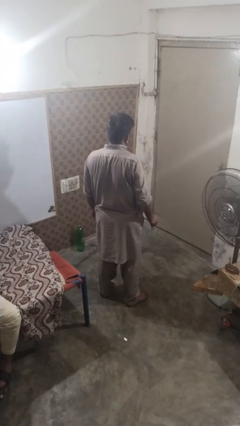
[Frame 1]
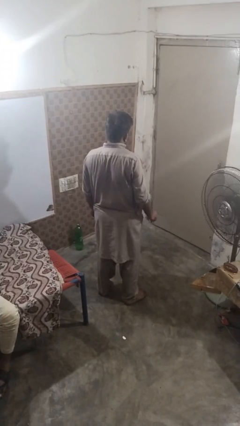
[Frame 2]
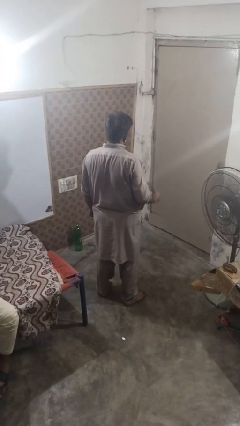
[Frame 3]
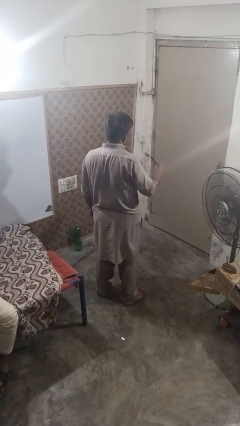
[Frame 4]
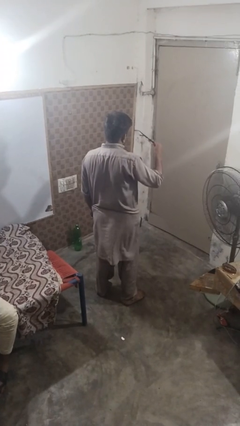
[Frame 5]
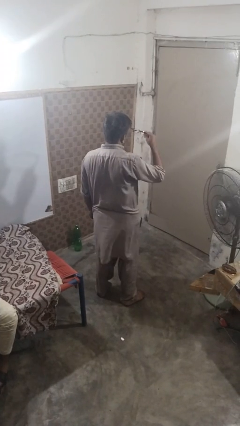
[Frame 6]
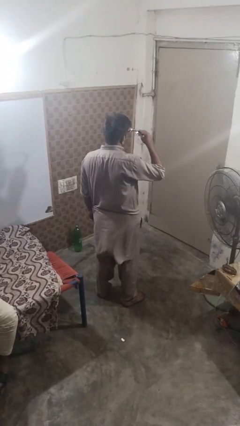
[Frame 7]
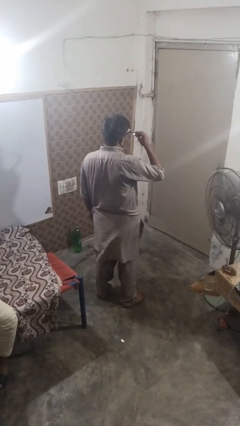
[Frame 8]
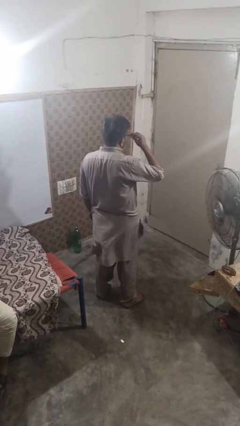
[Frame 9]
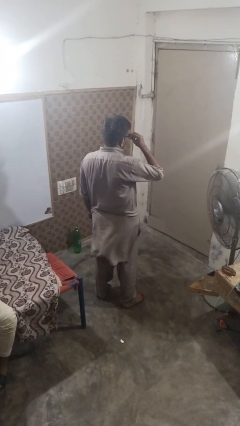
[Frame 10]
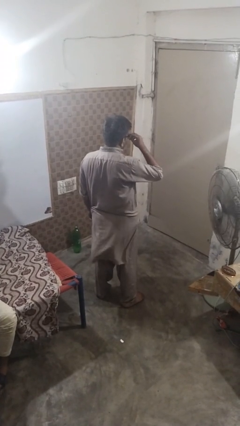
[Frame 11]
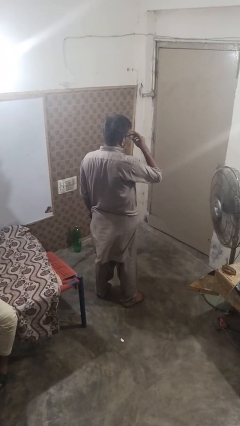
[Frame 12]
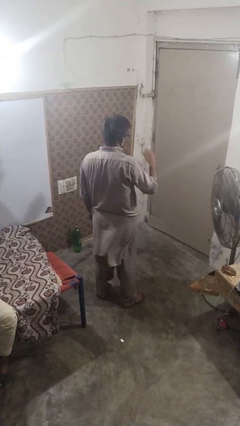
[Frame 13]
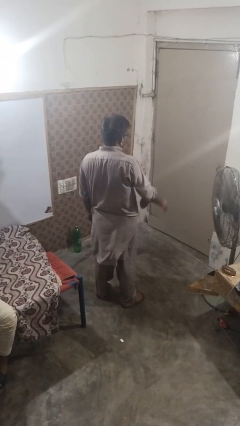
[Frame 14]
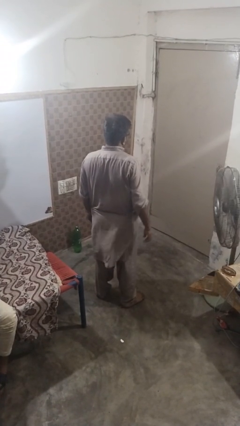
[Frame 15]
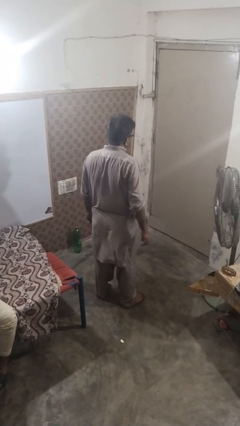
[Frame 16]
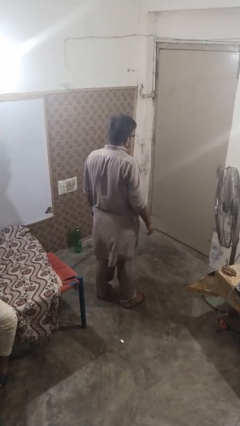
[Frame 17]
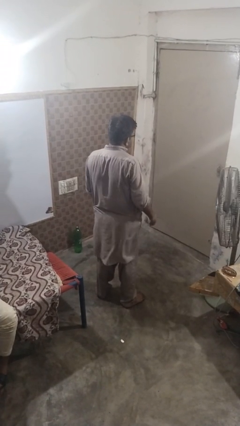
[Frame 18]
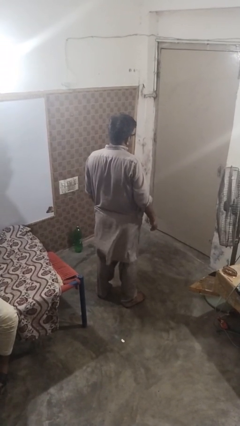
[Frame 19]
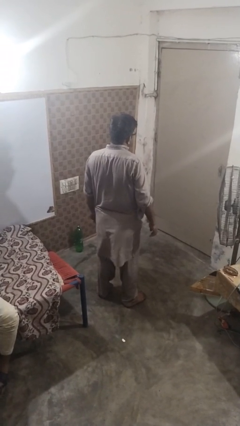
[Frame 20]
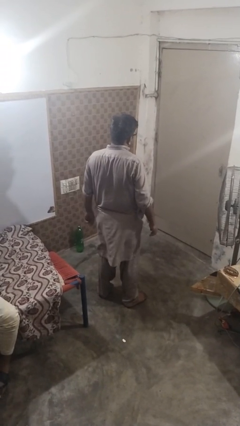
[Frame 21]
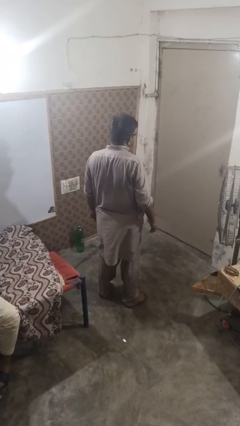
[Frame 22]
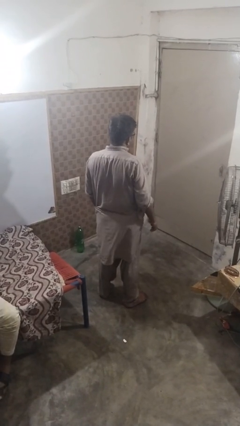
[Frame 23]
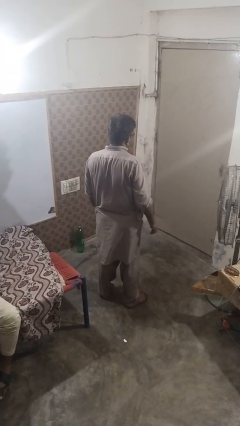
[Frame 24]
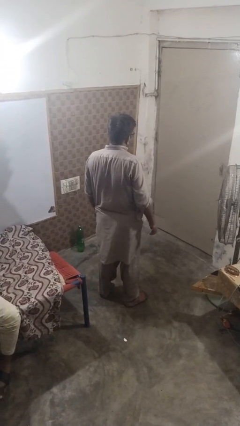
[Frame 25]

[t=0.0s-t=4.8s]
person puts on glasses

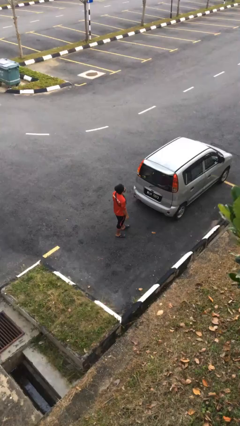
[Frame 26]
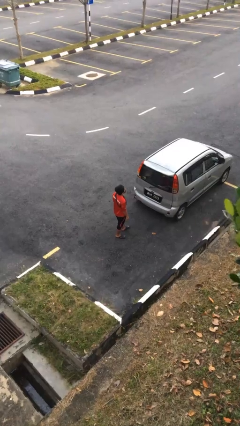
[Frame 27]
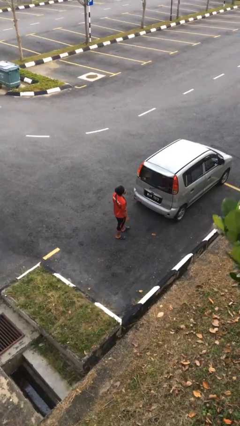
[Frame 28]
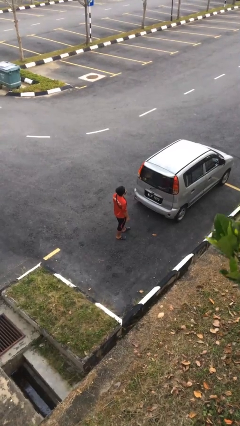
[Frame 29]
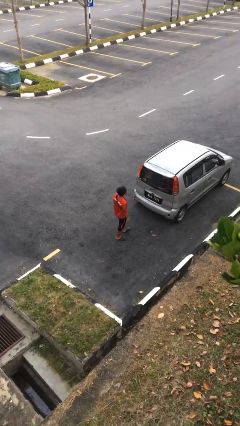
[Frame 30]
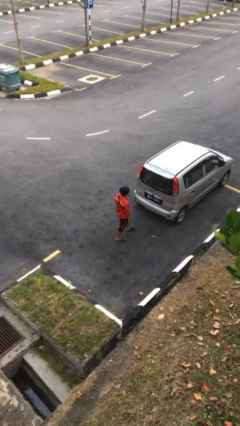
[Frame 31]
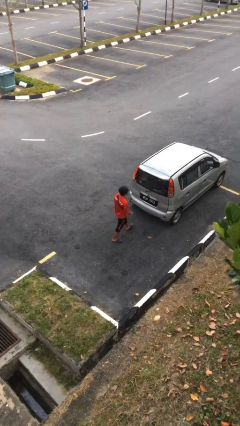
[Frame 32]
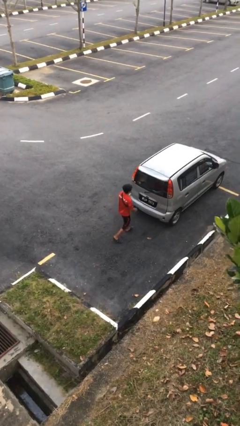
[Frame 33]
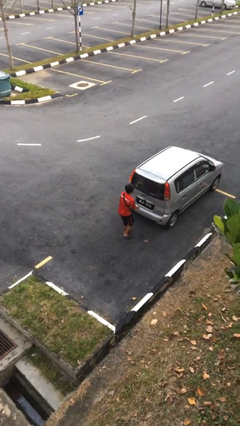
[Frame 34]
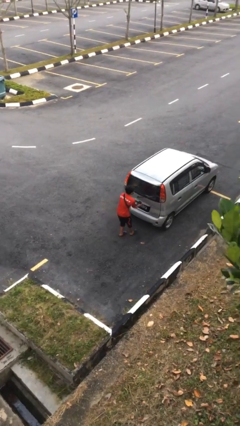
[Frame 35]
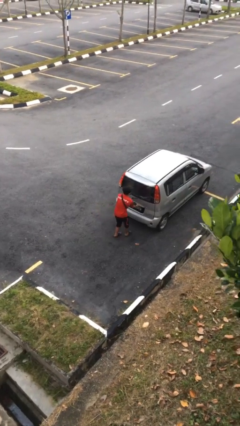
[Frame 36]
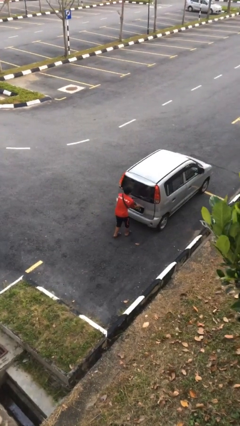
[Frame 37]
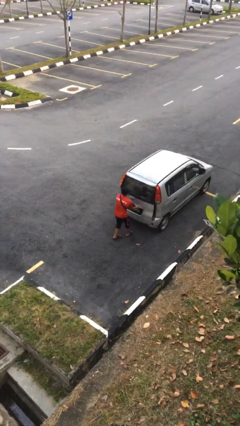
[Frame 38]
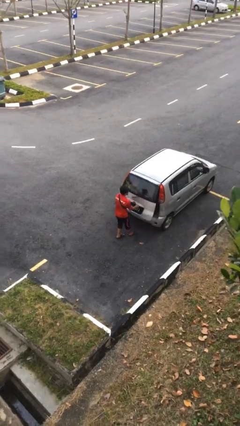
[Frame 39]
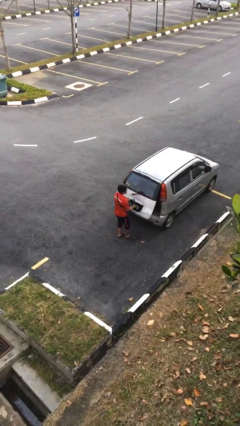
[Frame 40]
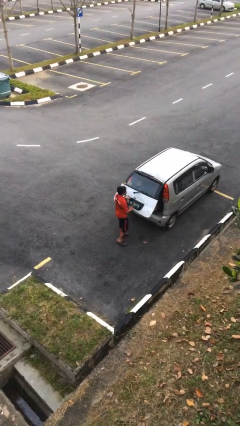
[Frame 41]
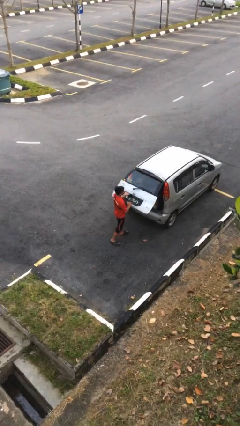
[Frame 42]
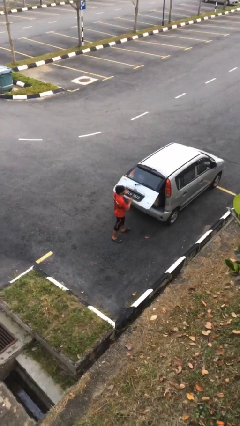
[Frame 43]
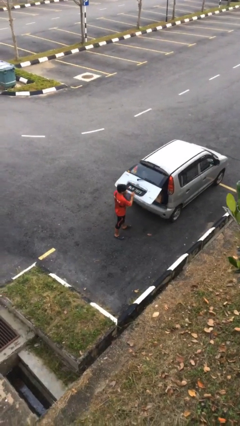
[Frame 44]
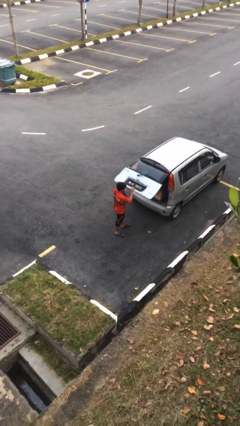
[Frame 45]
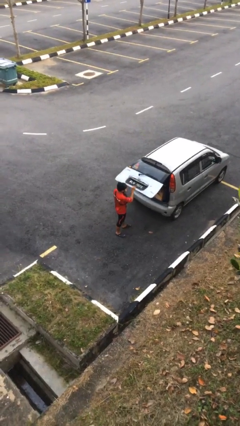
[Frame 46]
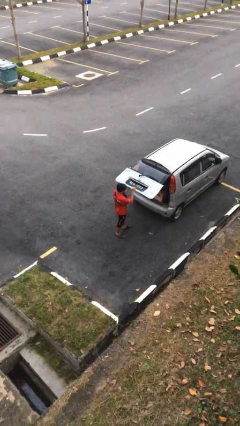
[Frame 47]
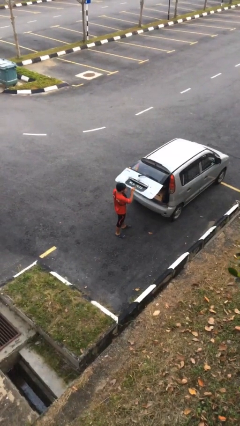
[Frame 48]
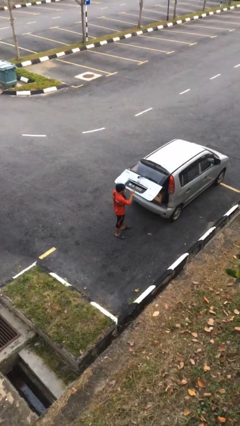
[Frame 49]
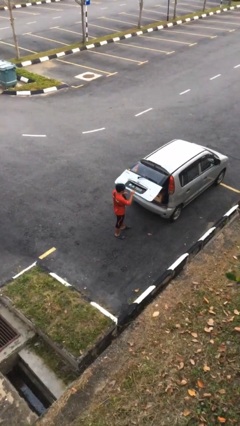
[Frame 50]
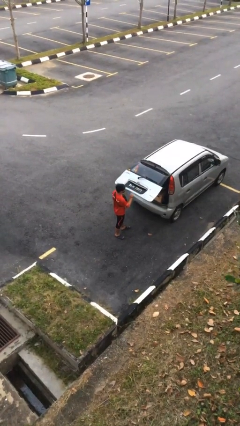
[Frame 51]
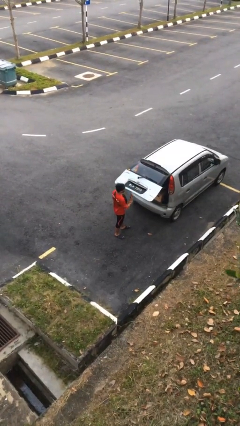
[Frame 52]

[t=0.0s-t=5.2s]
person opens car trunk

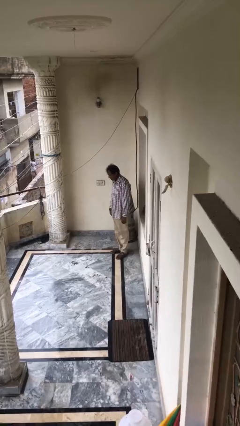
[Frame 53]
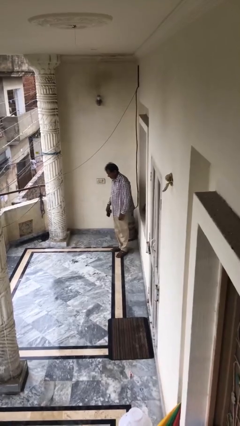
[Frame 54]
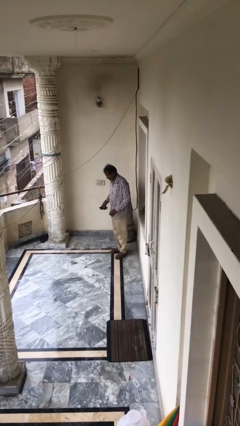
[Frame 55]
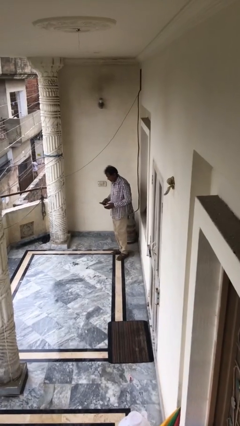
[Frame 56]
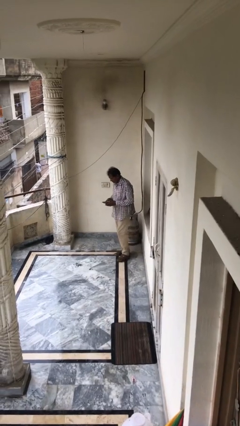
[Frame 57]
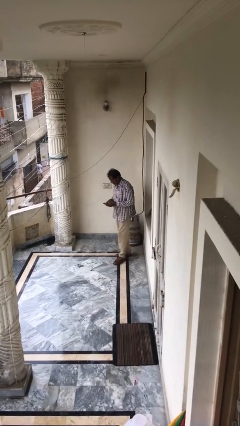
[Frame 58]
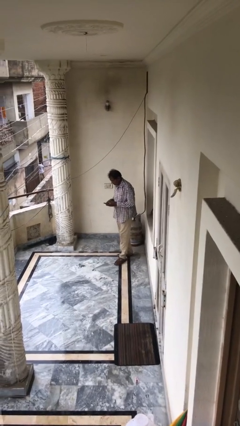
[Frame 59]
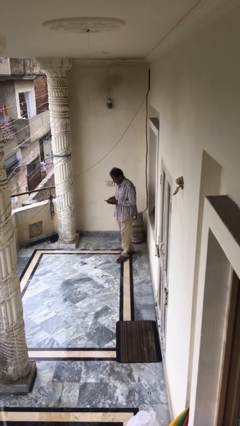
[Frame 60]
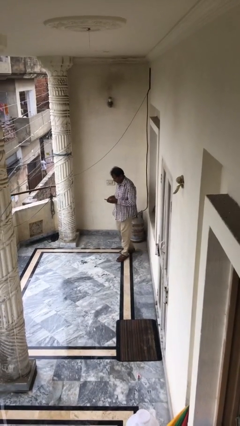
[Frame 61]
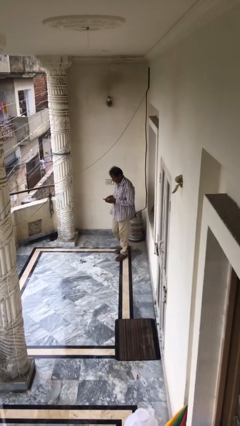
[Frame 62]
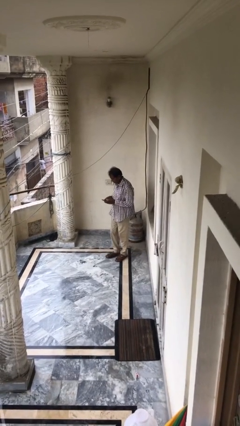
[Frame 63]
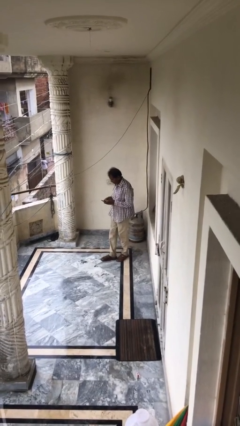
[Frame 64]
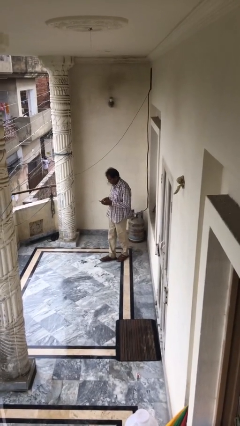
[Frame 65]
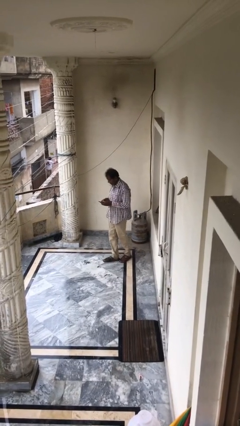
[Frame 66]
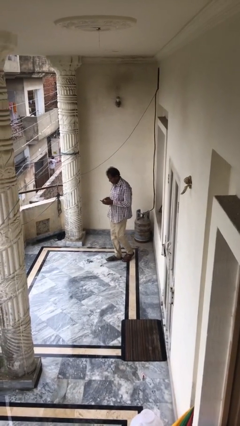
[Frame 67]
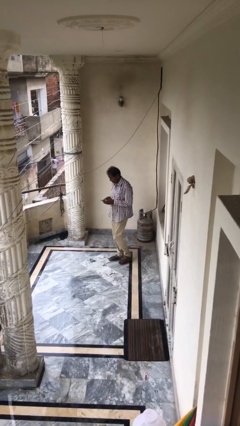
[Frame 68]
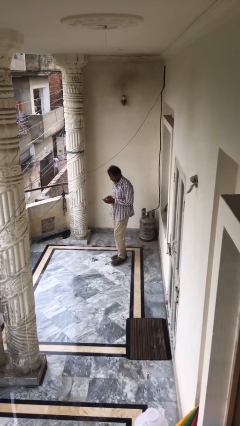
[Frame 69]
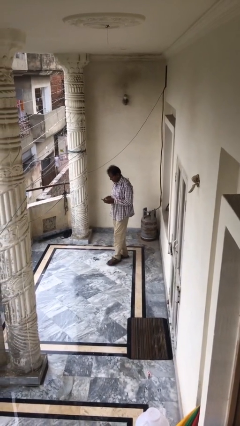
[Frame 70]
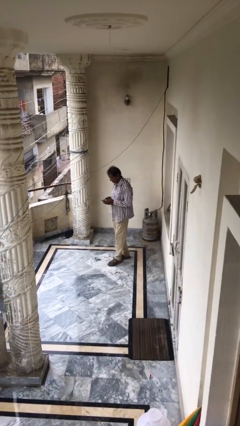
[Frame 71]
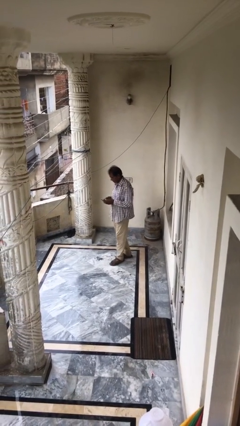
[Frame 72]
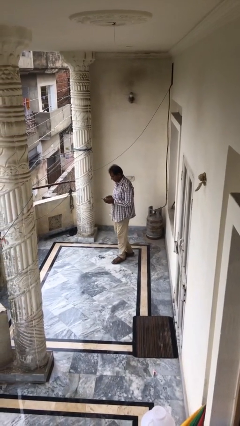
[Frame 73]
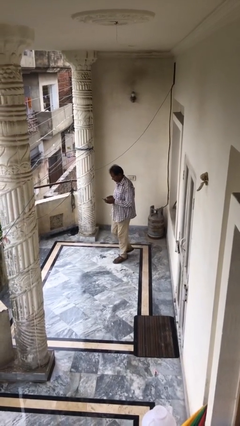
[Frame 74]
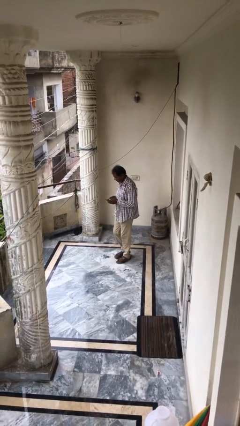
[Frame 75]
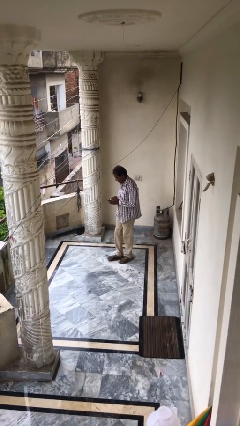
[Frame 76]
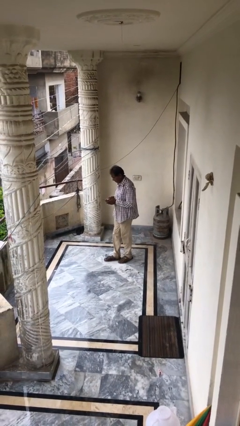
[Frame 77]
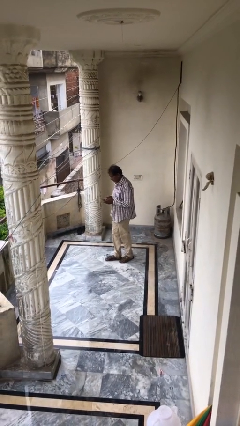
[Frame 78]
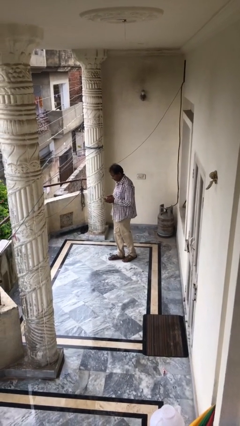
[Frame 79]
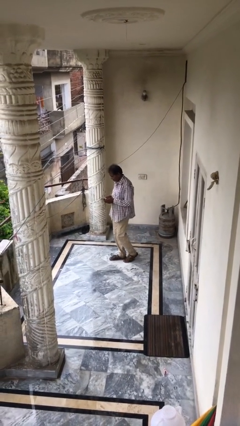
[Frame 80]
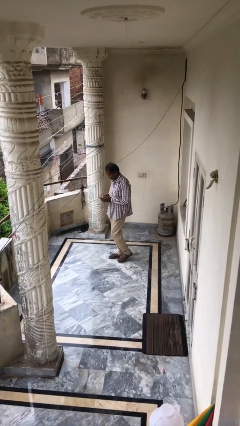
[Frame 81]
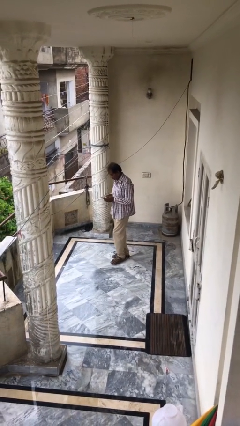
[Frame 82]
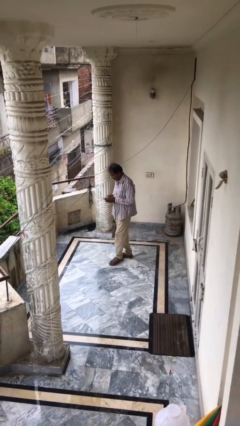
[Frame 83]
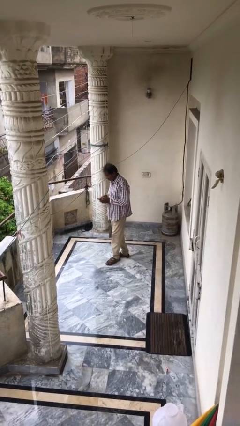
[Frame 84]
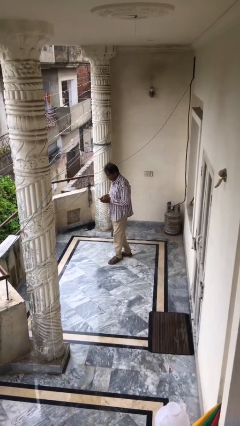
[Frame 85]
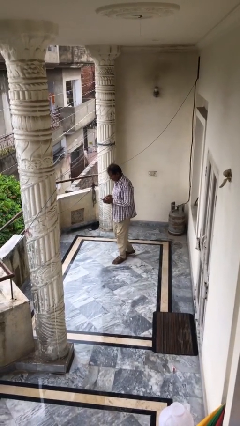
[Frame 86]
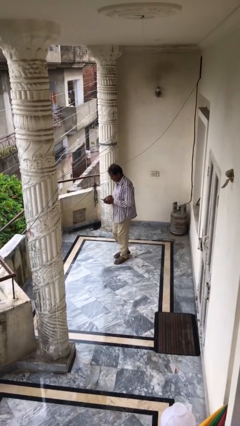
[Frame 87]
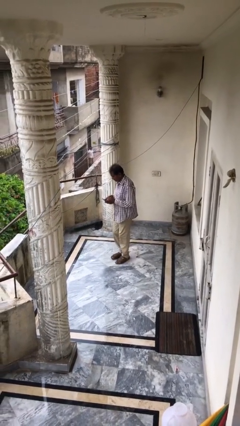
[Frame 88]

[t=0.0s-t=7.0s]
person texts on phone

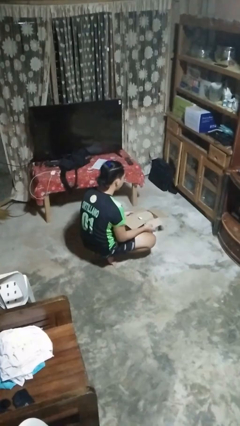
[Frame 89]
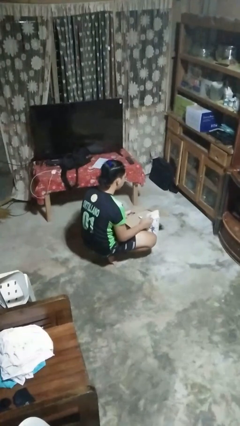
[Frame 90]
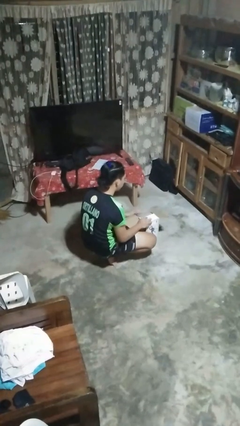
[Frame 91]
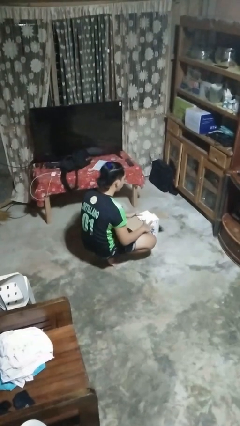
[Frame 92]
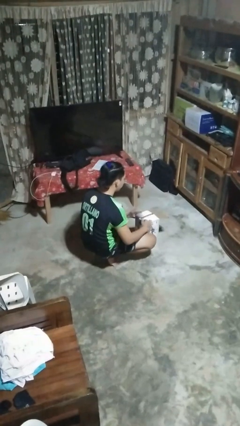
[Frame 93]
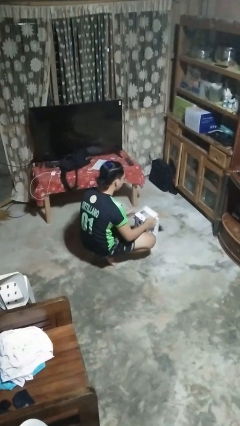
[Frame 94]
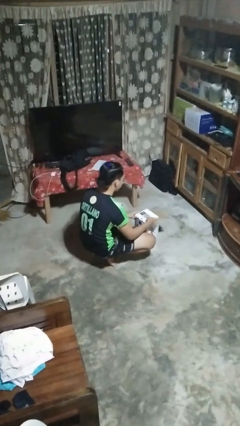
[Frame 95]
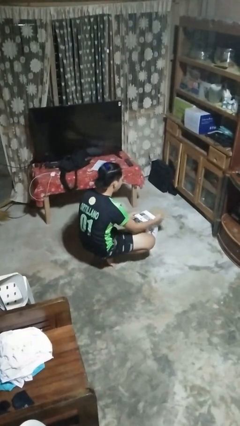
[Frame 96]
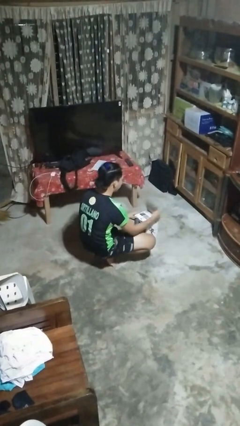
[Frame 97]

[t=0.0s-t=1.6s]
person closes box
